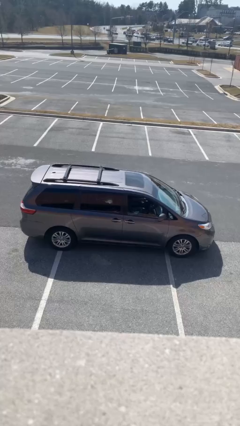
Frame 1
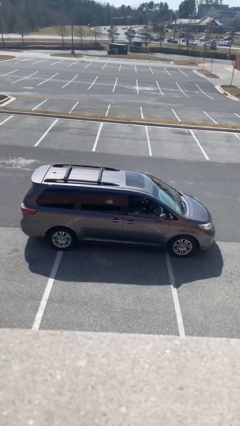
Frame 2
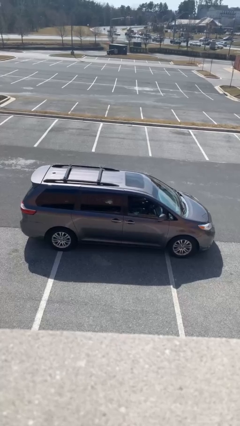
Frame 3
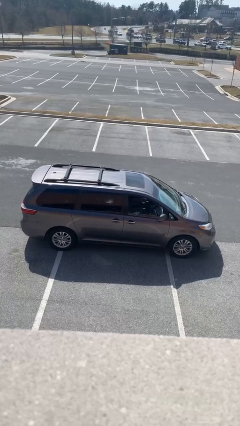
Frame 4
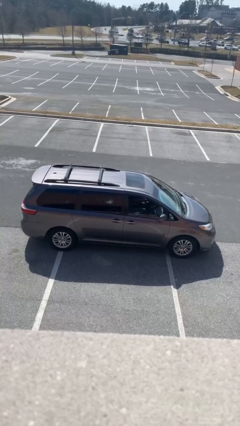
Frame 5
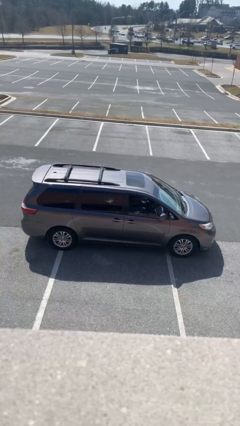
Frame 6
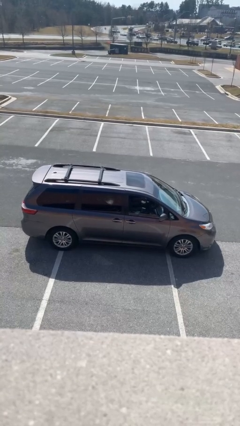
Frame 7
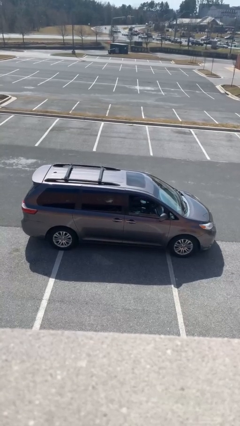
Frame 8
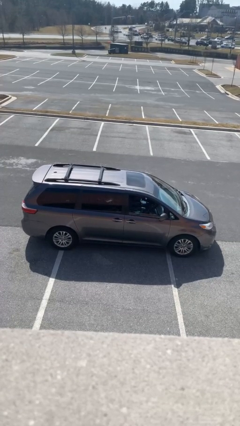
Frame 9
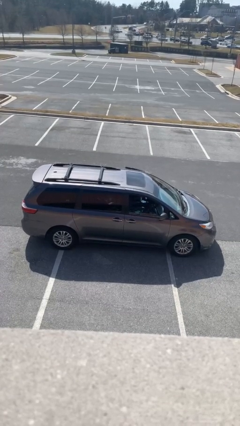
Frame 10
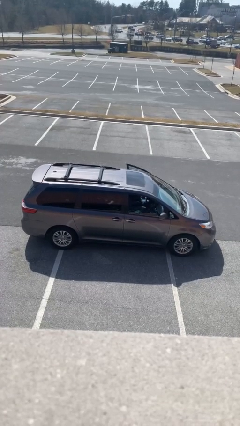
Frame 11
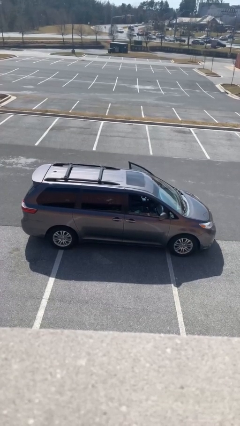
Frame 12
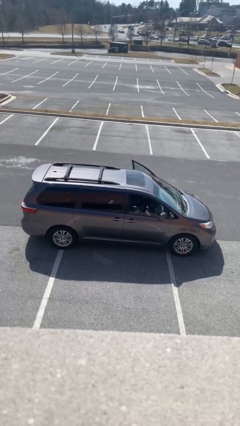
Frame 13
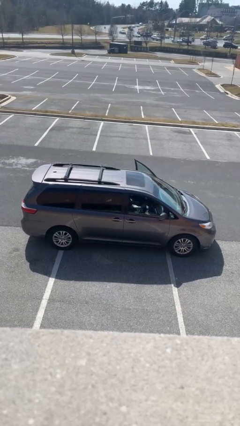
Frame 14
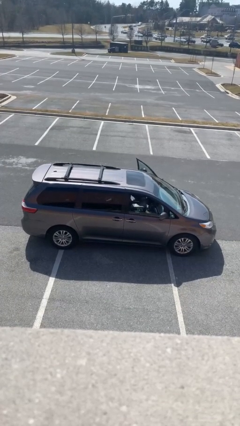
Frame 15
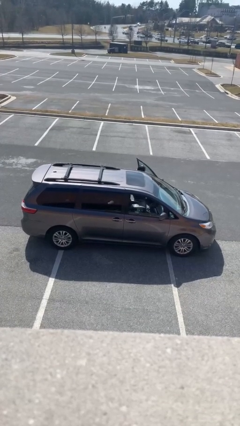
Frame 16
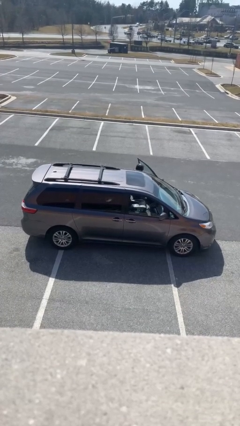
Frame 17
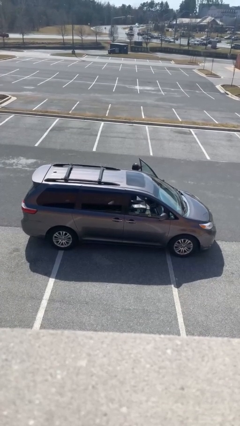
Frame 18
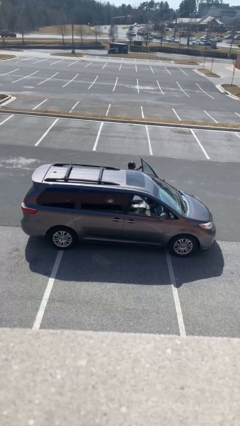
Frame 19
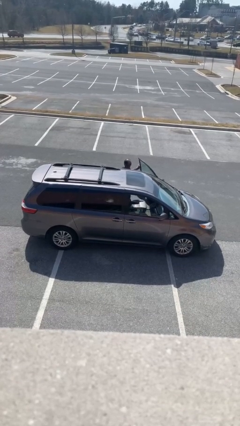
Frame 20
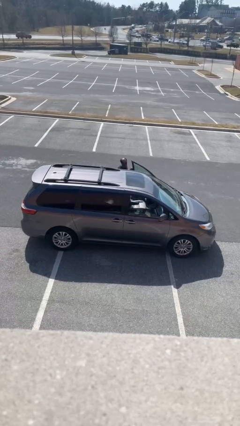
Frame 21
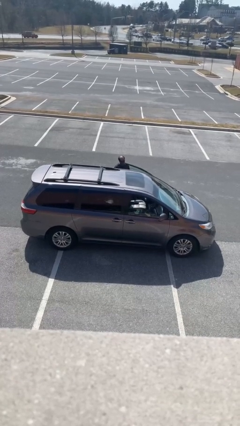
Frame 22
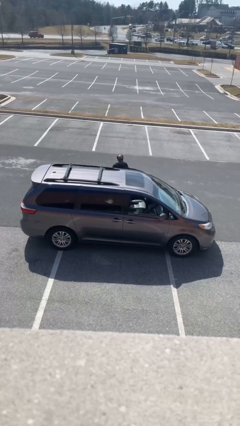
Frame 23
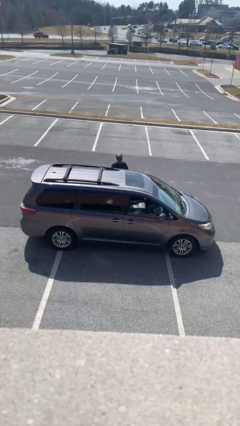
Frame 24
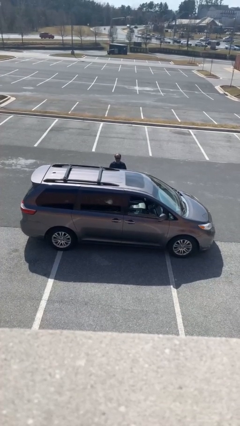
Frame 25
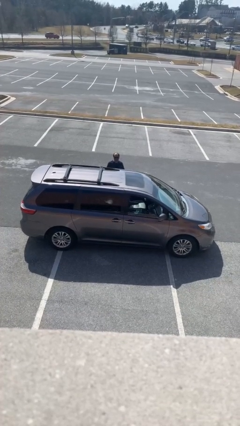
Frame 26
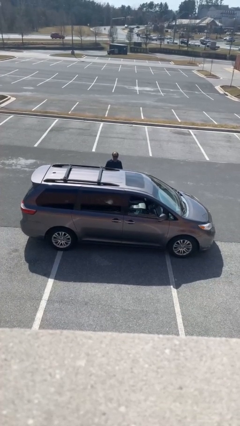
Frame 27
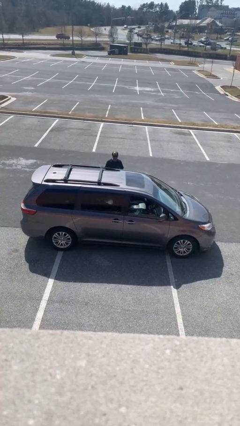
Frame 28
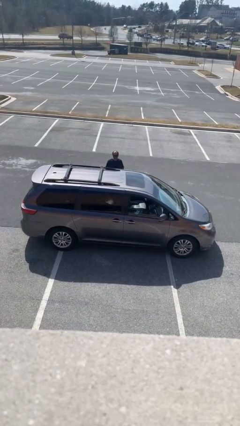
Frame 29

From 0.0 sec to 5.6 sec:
car drops off person

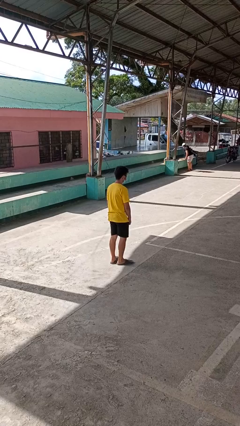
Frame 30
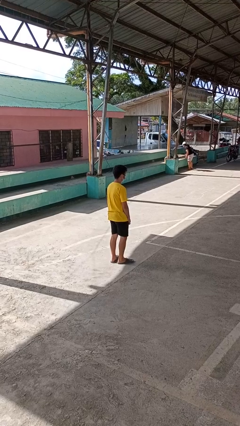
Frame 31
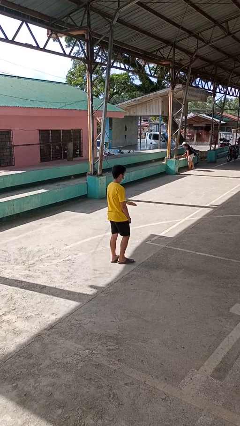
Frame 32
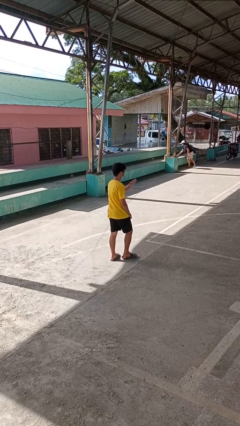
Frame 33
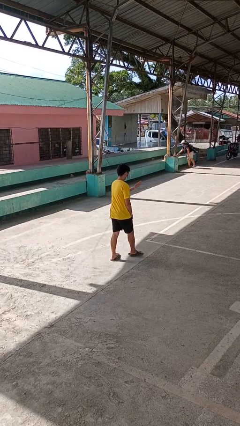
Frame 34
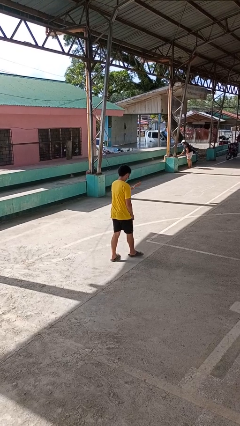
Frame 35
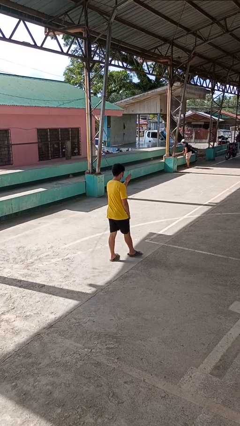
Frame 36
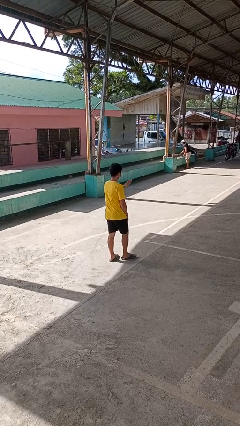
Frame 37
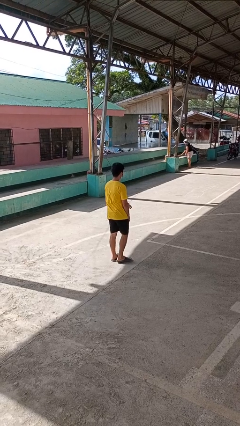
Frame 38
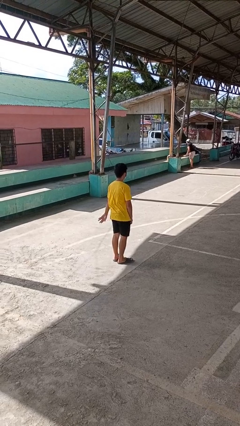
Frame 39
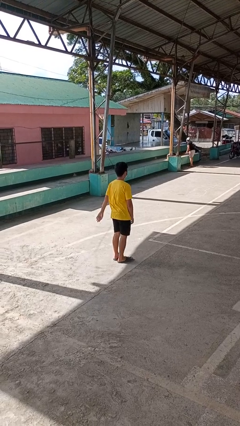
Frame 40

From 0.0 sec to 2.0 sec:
person karate chop

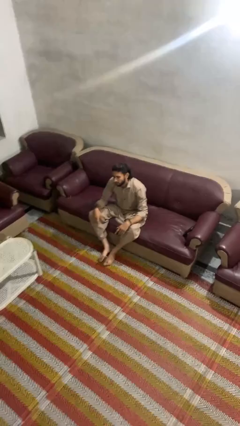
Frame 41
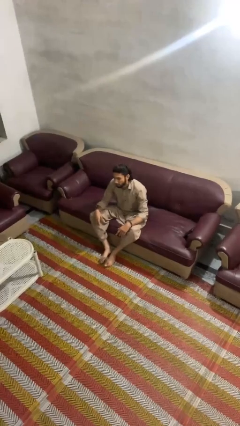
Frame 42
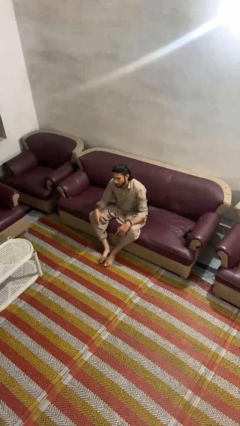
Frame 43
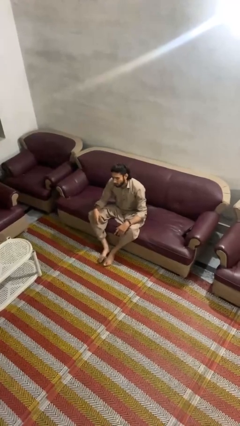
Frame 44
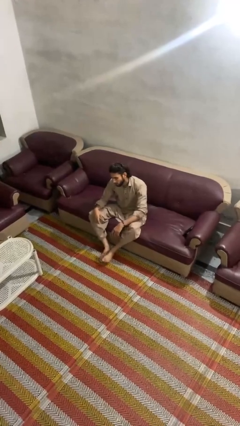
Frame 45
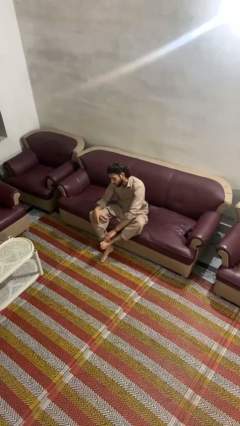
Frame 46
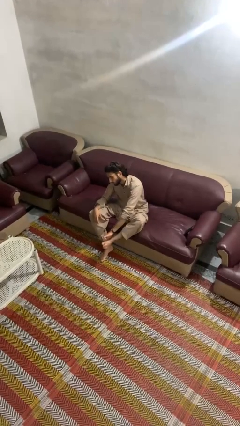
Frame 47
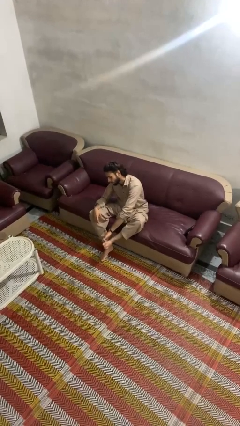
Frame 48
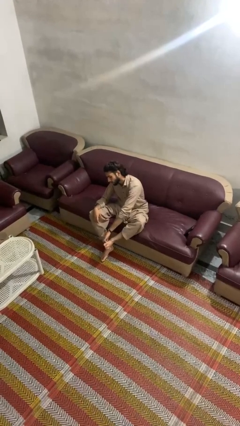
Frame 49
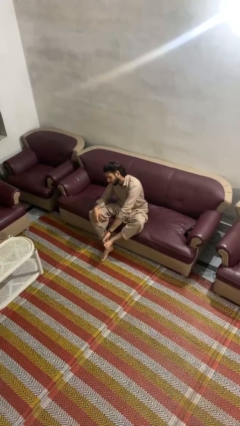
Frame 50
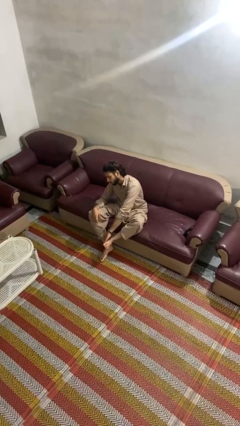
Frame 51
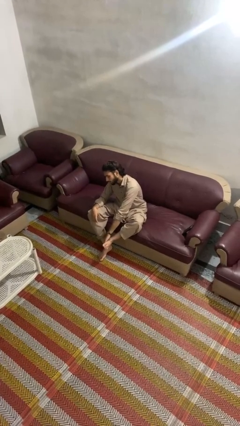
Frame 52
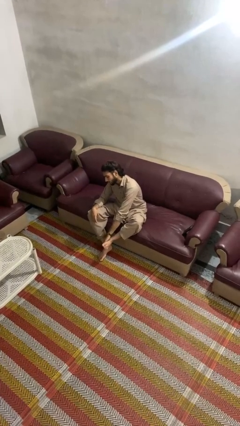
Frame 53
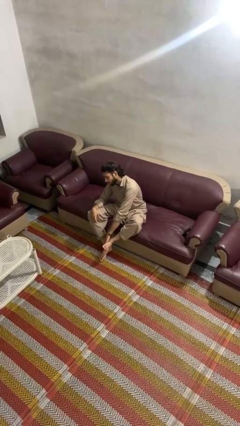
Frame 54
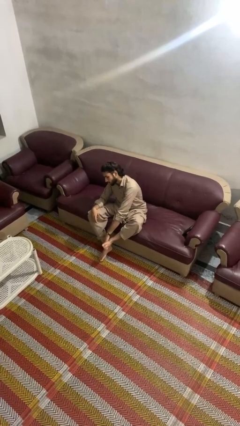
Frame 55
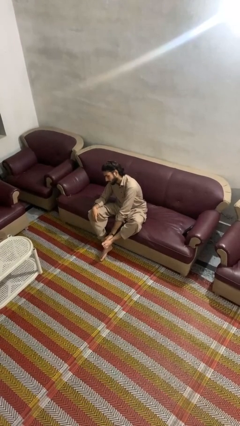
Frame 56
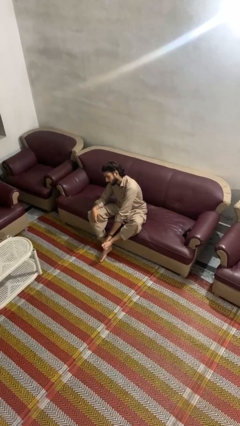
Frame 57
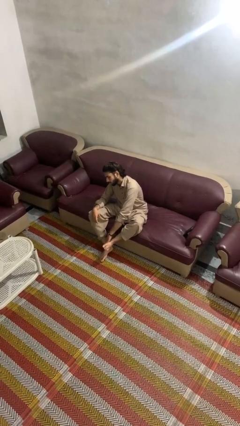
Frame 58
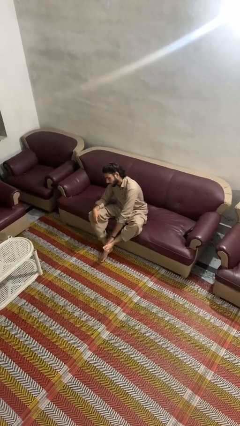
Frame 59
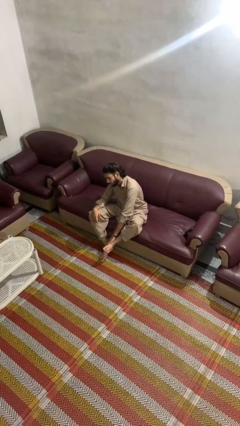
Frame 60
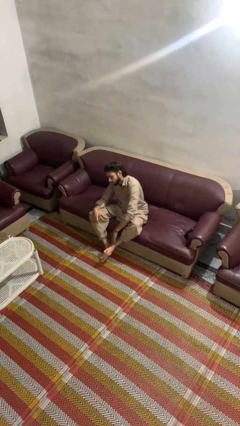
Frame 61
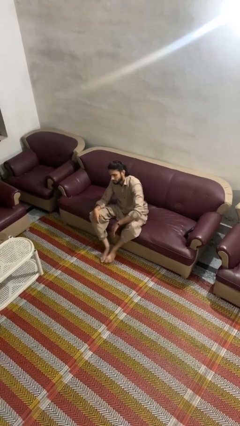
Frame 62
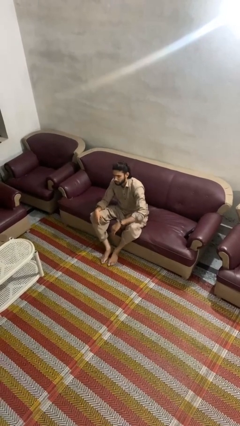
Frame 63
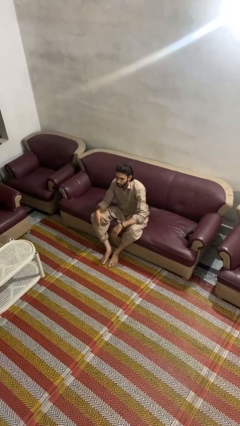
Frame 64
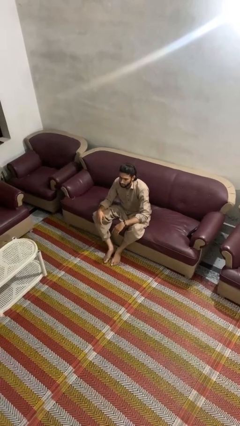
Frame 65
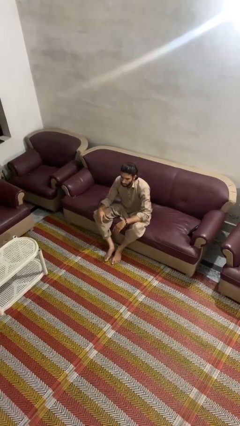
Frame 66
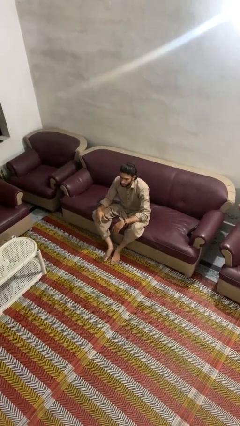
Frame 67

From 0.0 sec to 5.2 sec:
person rubs foot

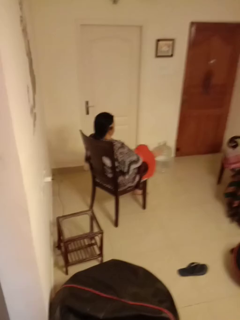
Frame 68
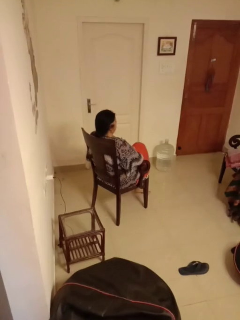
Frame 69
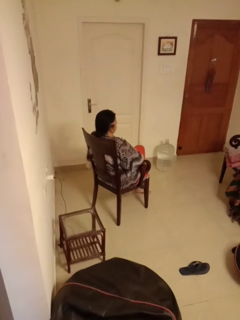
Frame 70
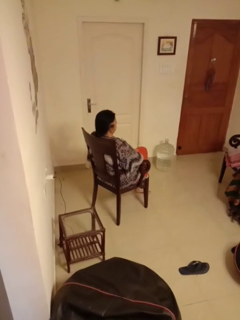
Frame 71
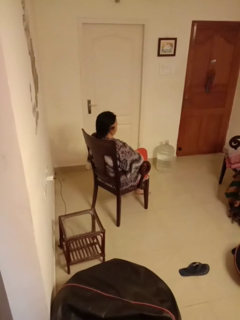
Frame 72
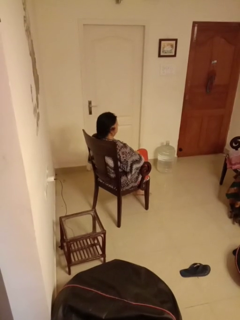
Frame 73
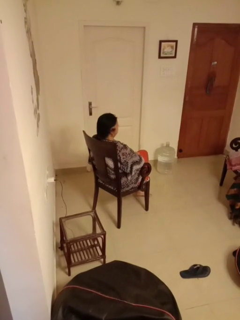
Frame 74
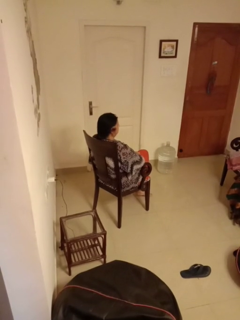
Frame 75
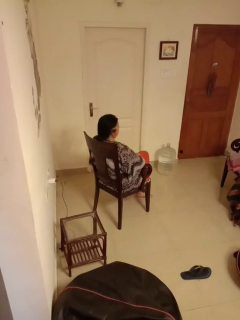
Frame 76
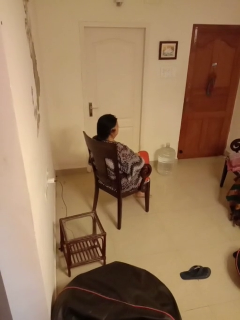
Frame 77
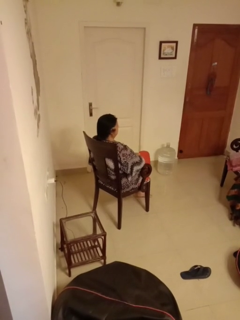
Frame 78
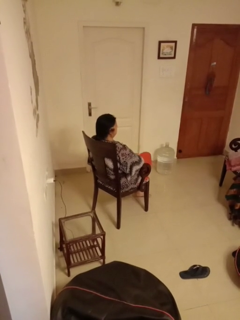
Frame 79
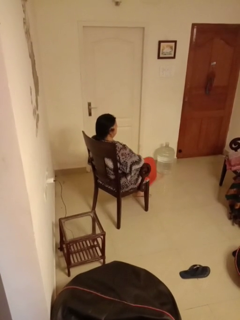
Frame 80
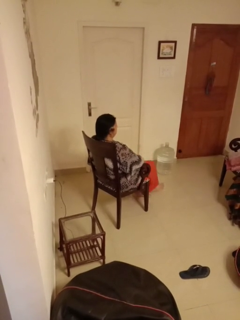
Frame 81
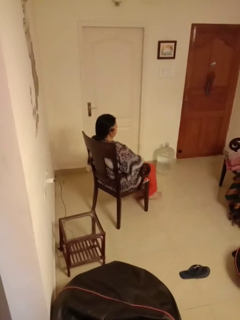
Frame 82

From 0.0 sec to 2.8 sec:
person crosses legs

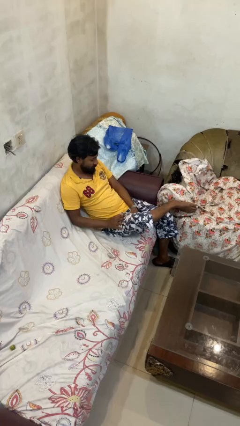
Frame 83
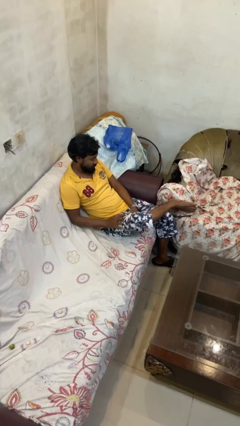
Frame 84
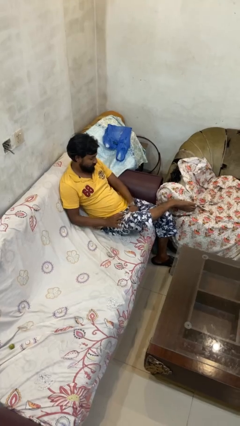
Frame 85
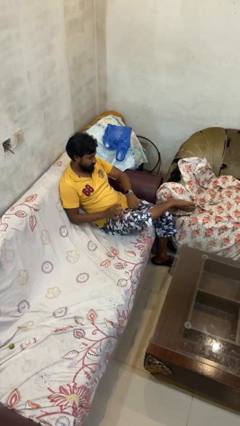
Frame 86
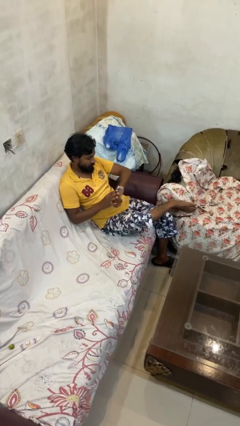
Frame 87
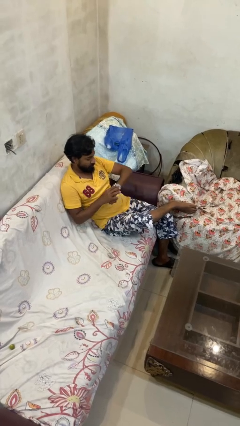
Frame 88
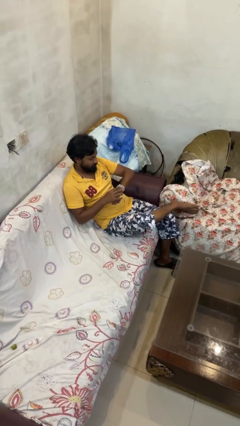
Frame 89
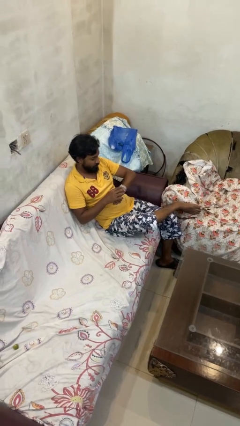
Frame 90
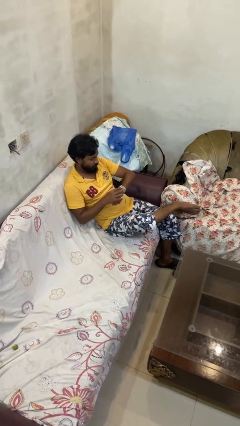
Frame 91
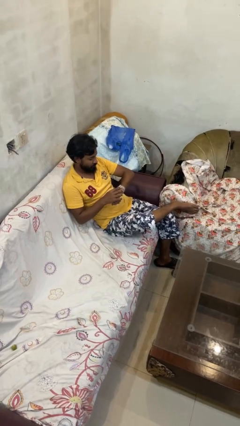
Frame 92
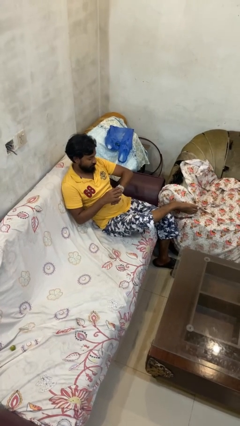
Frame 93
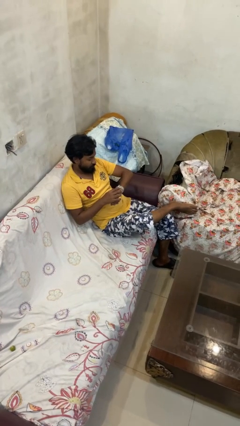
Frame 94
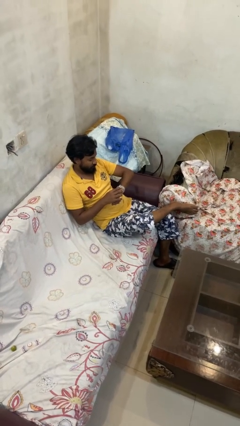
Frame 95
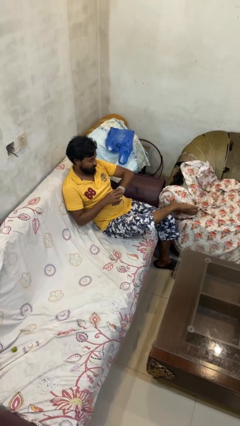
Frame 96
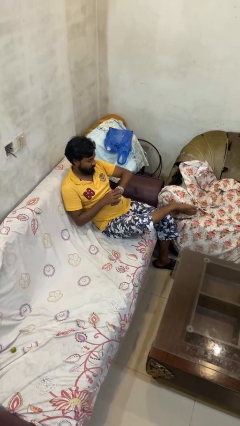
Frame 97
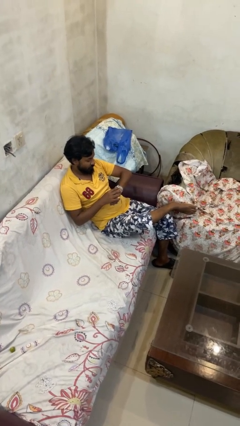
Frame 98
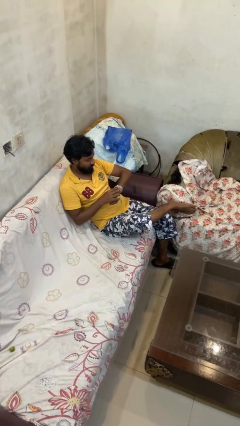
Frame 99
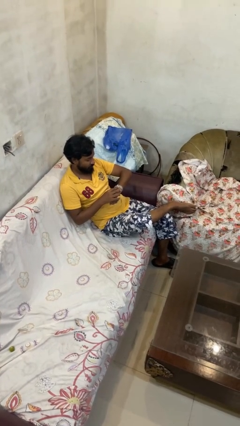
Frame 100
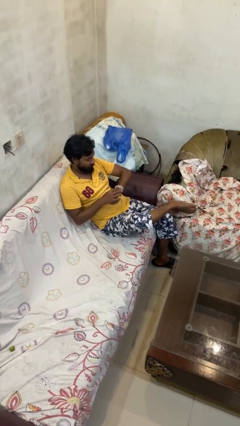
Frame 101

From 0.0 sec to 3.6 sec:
person looks at wristwatch
